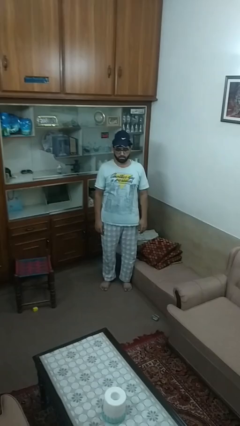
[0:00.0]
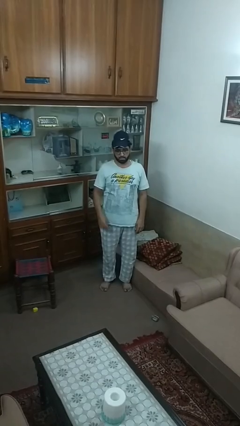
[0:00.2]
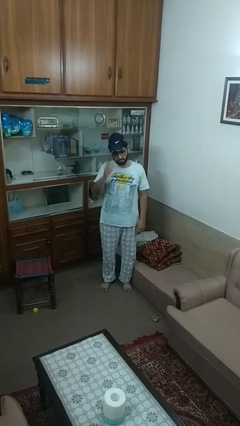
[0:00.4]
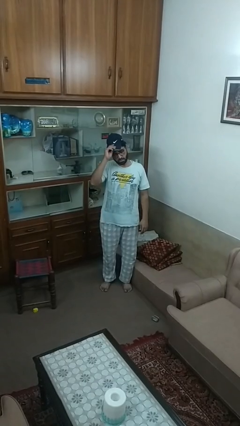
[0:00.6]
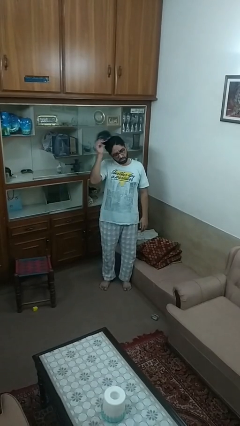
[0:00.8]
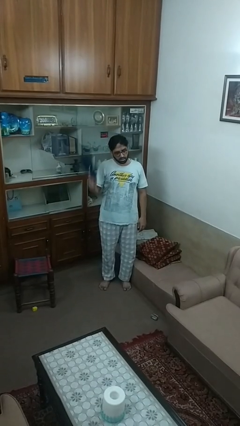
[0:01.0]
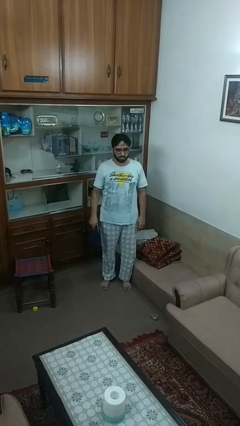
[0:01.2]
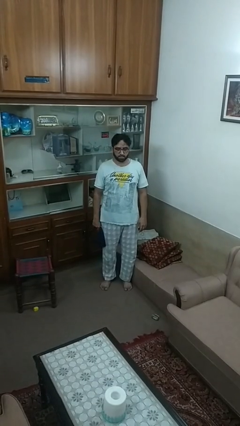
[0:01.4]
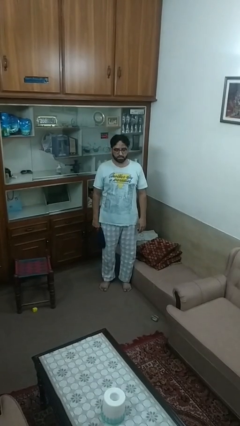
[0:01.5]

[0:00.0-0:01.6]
person takes off hat

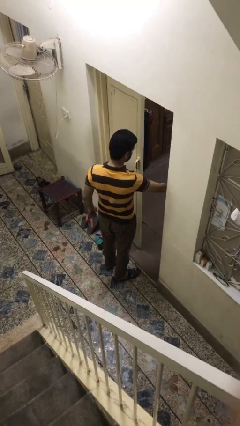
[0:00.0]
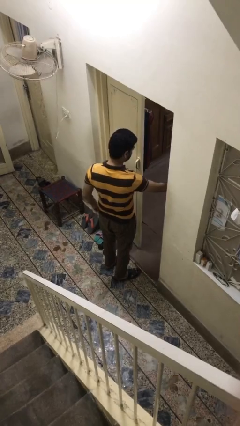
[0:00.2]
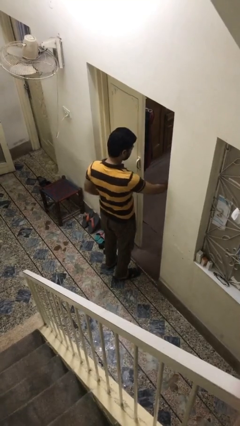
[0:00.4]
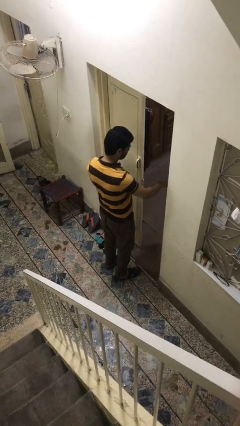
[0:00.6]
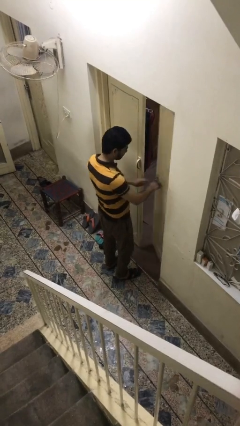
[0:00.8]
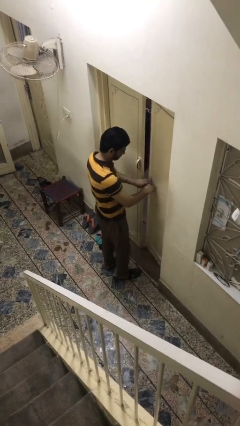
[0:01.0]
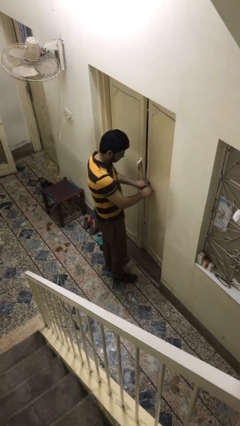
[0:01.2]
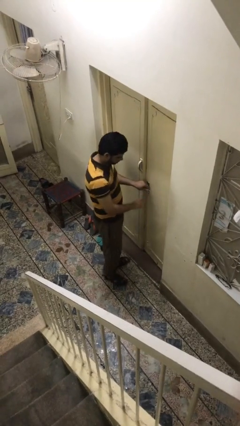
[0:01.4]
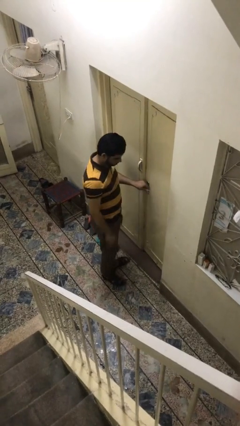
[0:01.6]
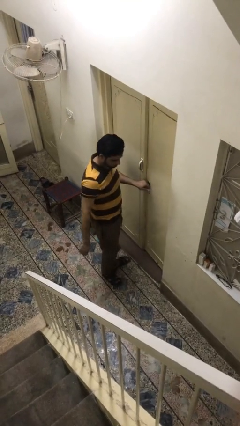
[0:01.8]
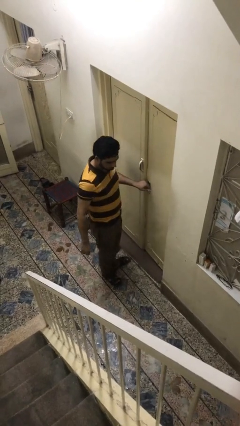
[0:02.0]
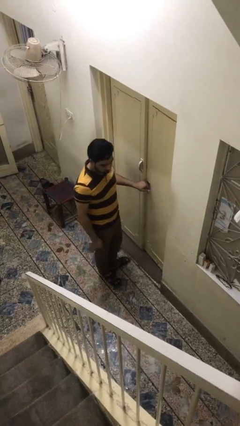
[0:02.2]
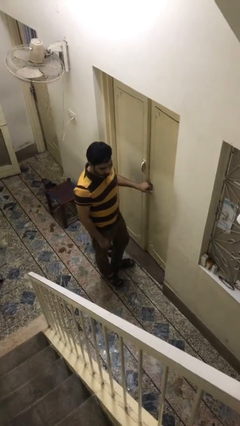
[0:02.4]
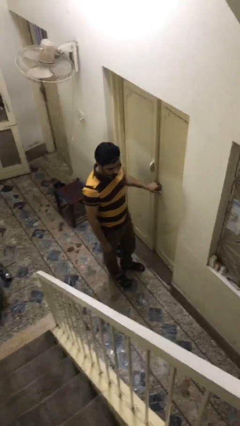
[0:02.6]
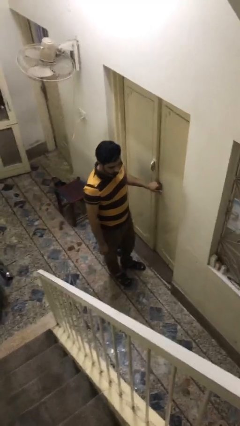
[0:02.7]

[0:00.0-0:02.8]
person closes facility door

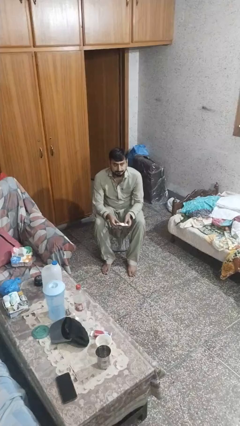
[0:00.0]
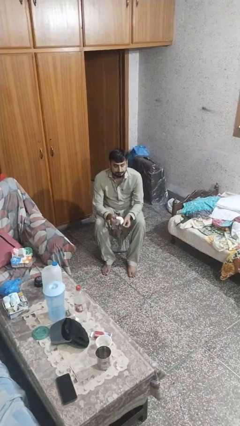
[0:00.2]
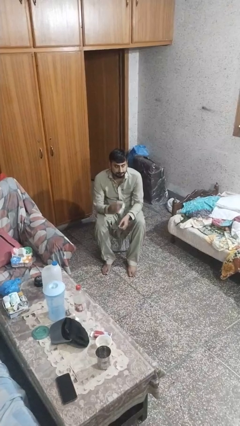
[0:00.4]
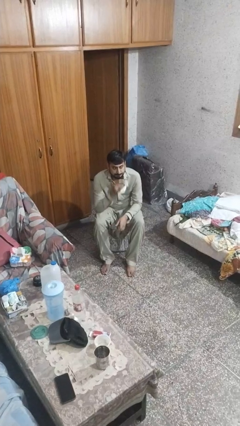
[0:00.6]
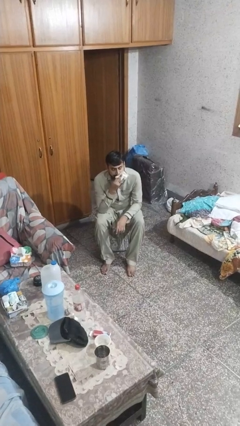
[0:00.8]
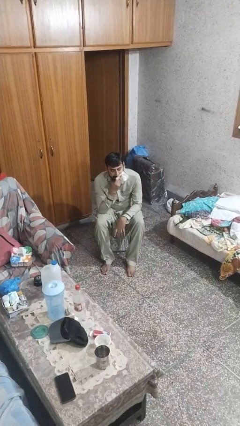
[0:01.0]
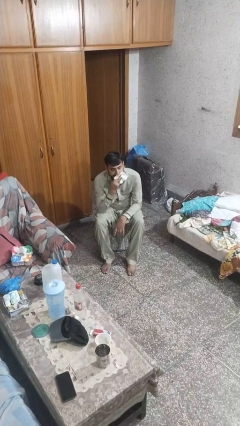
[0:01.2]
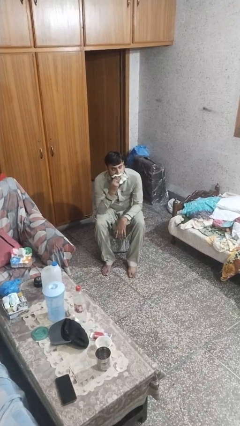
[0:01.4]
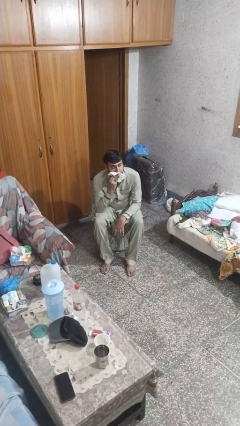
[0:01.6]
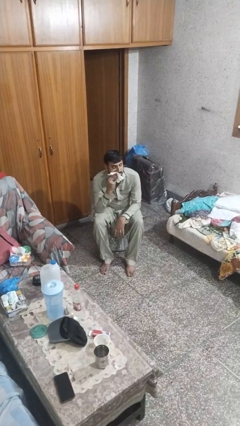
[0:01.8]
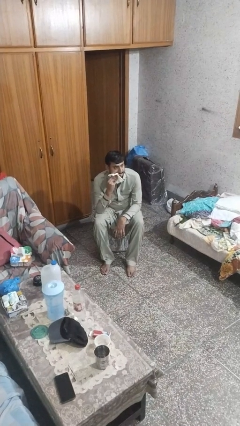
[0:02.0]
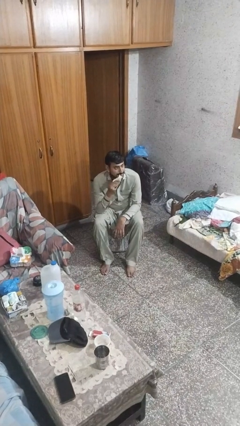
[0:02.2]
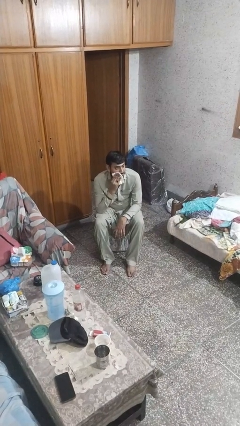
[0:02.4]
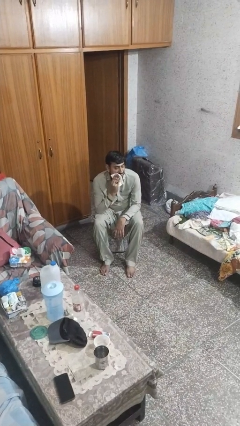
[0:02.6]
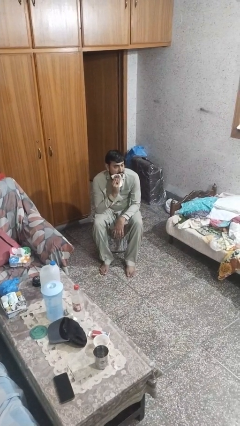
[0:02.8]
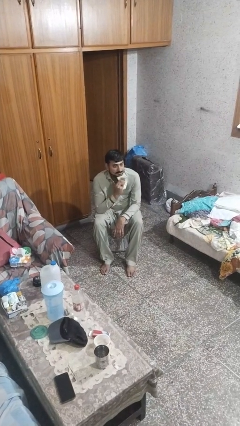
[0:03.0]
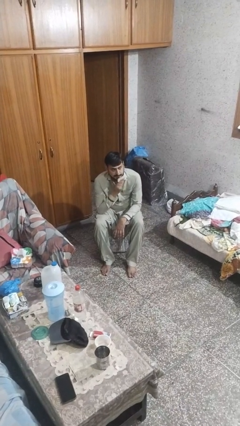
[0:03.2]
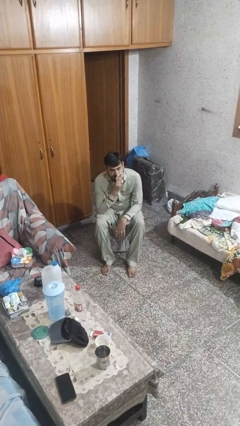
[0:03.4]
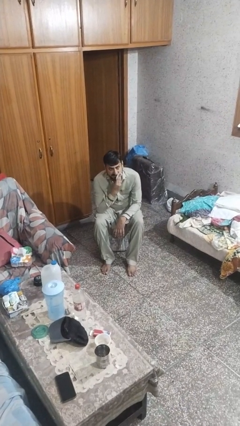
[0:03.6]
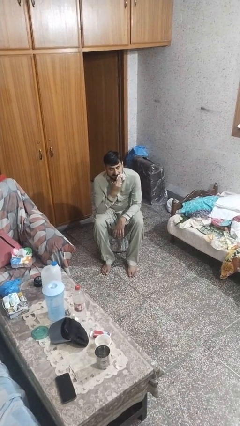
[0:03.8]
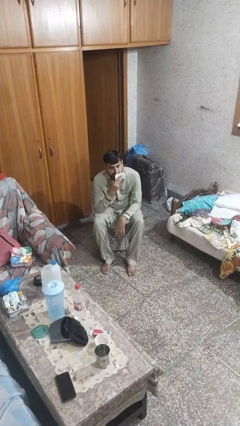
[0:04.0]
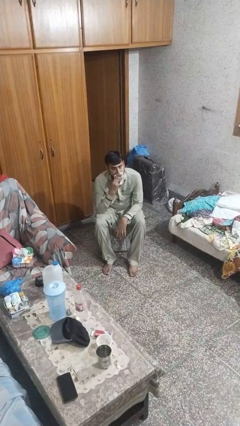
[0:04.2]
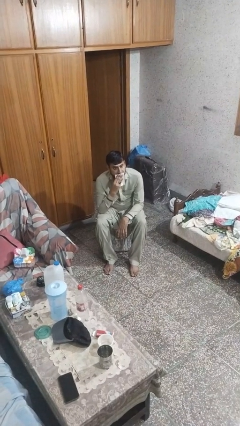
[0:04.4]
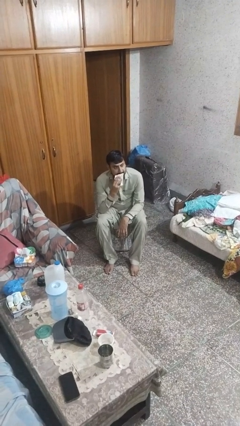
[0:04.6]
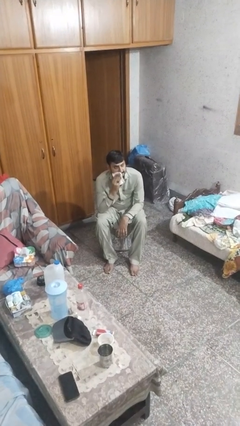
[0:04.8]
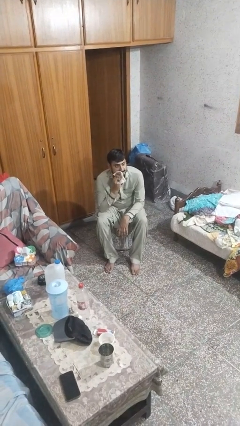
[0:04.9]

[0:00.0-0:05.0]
person wipes mouth with napkin

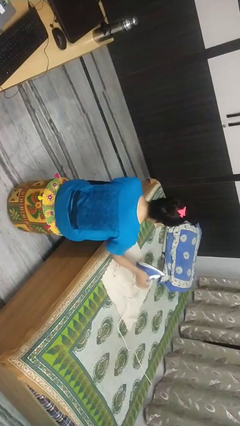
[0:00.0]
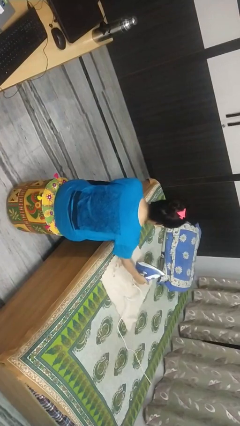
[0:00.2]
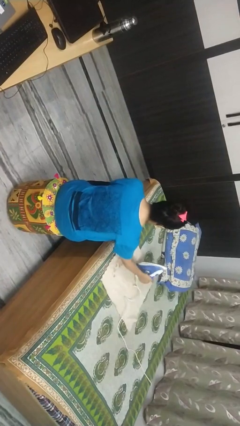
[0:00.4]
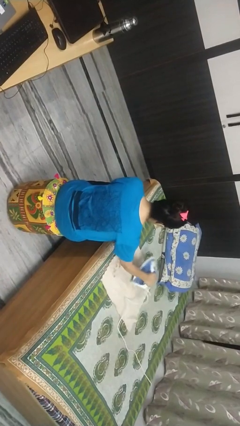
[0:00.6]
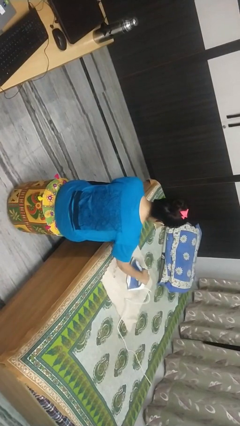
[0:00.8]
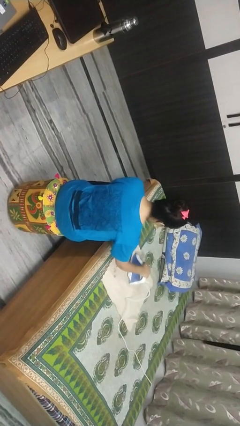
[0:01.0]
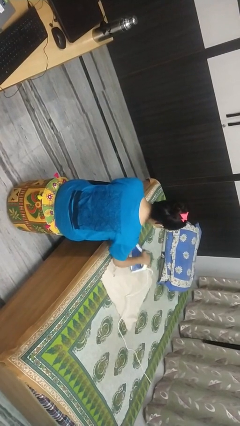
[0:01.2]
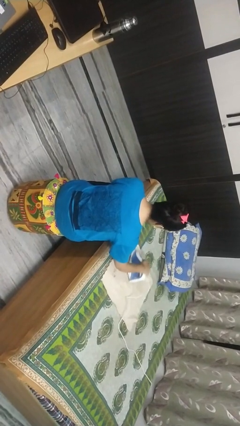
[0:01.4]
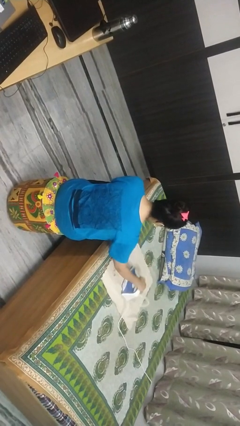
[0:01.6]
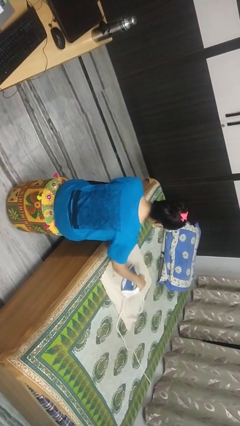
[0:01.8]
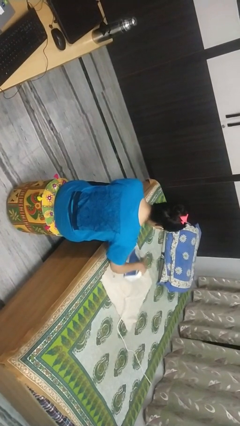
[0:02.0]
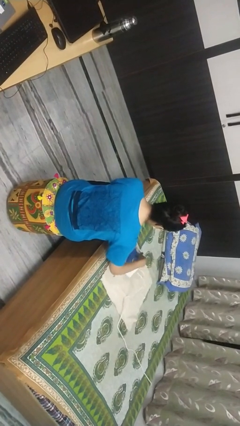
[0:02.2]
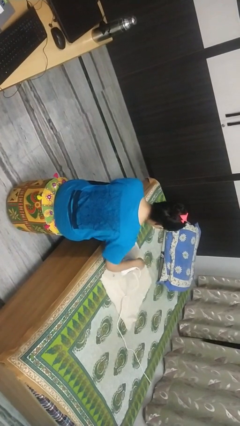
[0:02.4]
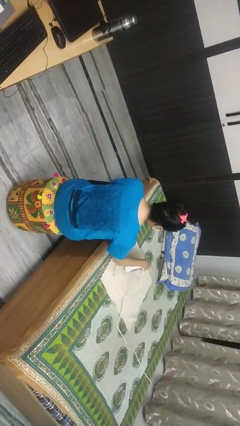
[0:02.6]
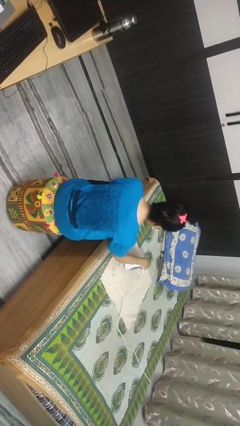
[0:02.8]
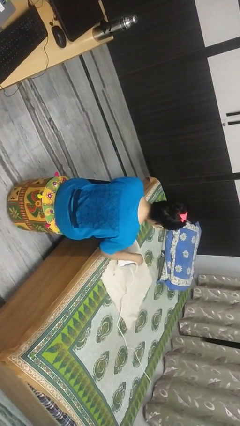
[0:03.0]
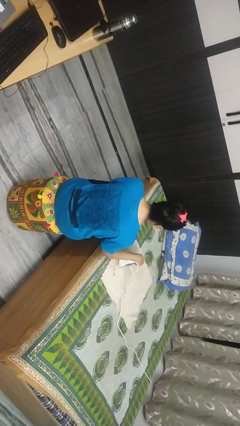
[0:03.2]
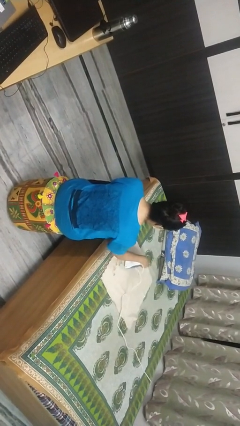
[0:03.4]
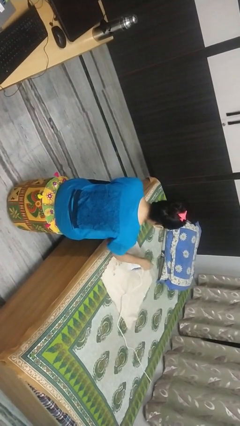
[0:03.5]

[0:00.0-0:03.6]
person irons clothes

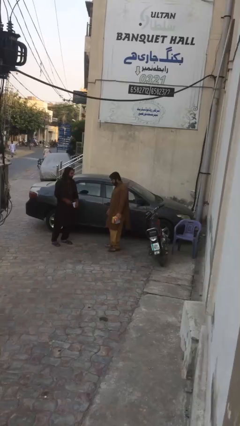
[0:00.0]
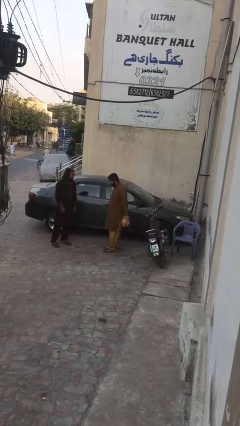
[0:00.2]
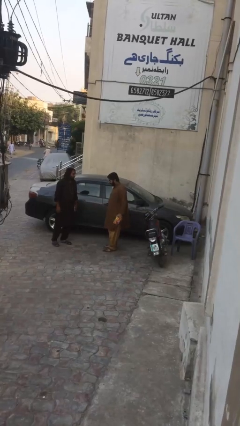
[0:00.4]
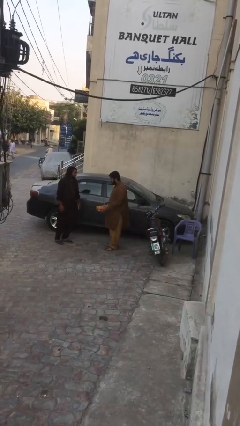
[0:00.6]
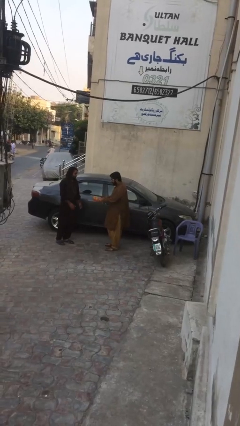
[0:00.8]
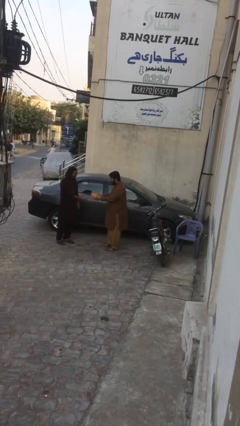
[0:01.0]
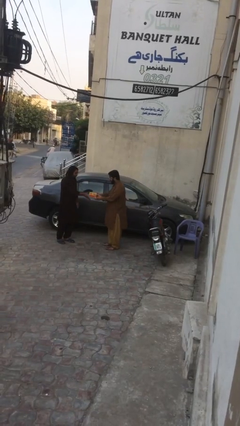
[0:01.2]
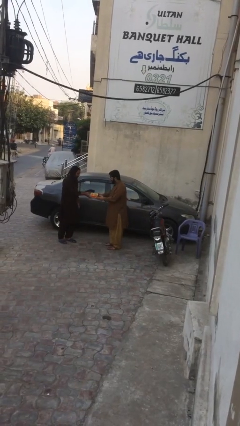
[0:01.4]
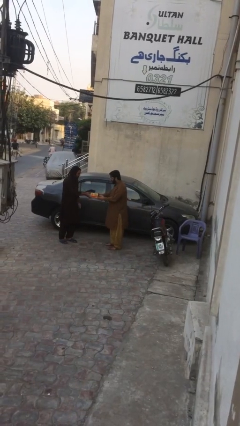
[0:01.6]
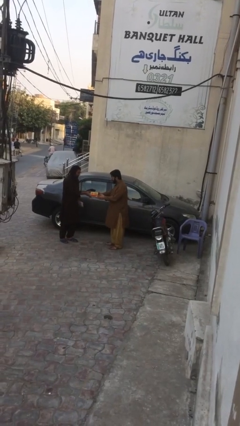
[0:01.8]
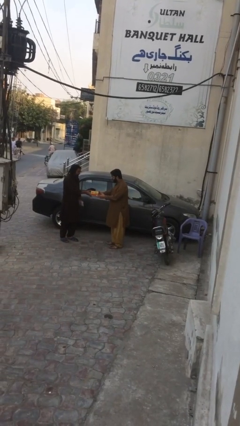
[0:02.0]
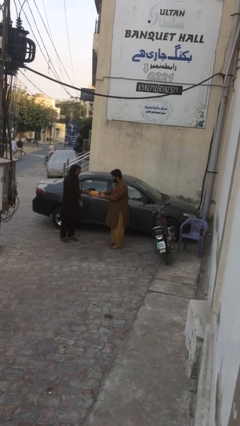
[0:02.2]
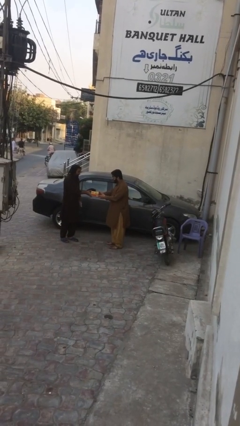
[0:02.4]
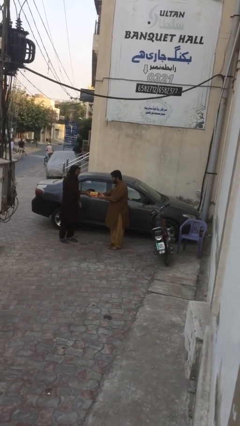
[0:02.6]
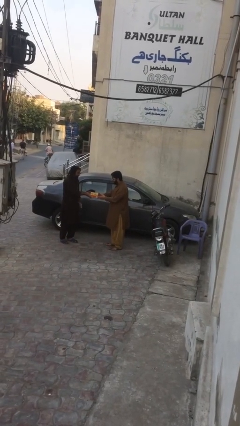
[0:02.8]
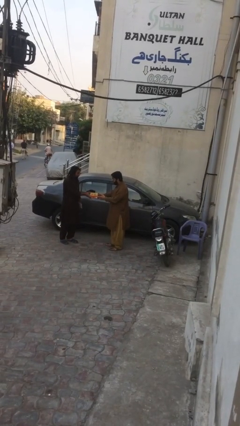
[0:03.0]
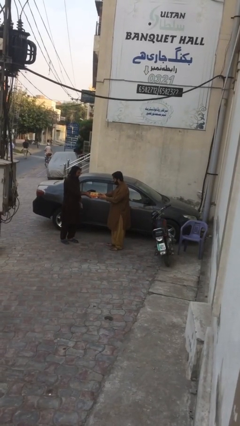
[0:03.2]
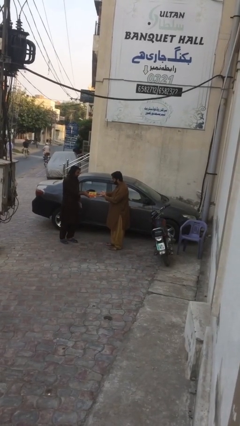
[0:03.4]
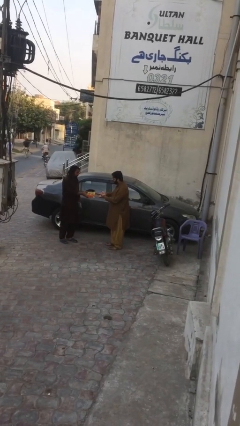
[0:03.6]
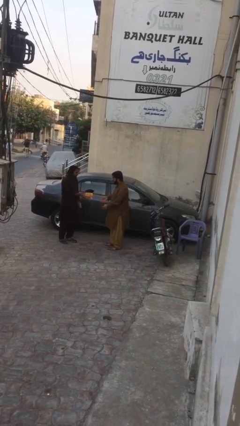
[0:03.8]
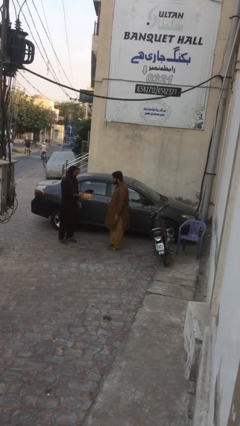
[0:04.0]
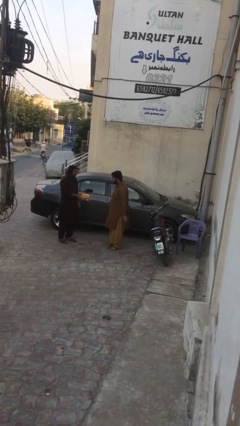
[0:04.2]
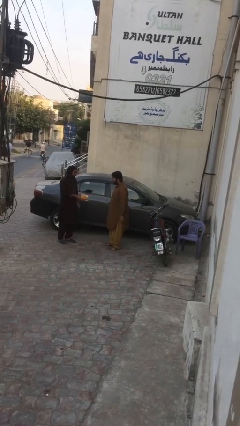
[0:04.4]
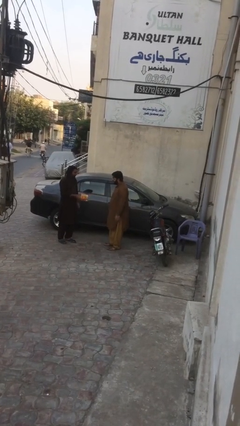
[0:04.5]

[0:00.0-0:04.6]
person transfers object to person

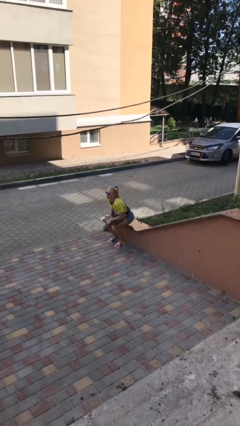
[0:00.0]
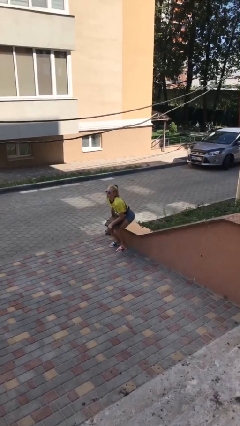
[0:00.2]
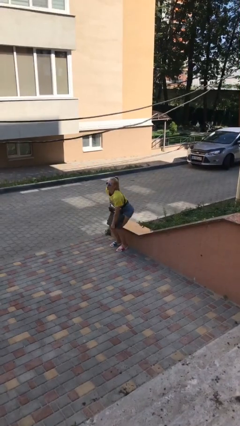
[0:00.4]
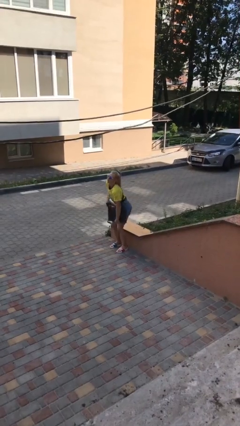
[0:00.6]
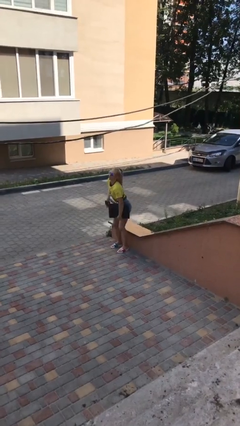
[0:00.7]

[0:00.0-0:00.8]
person stands up
